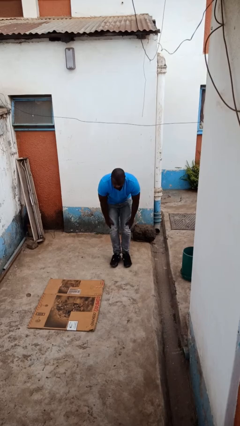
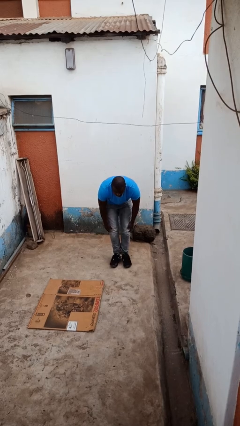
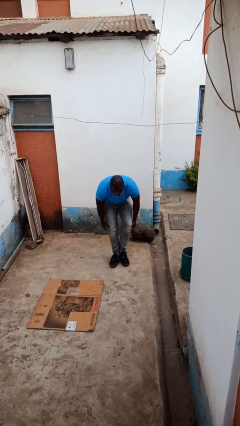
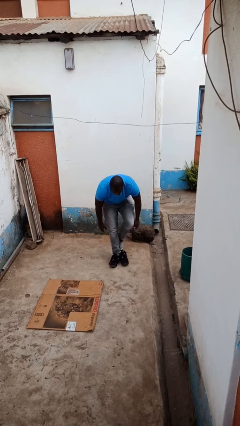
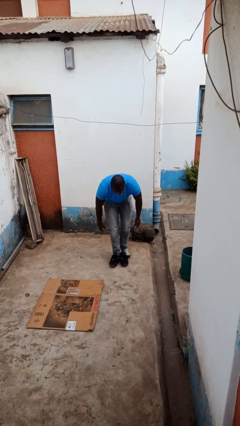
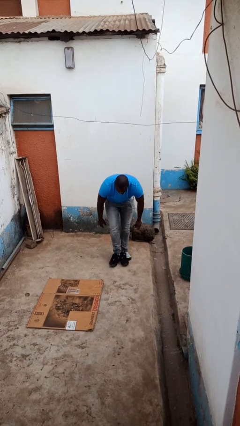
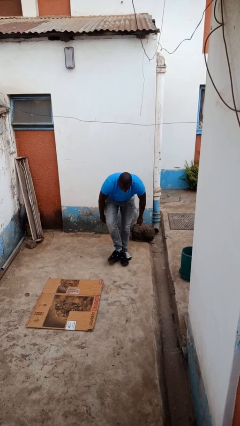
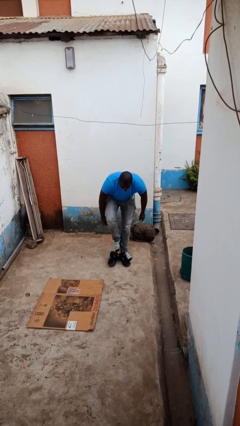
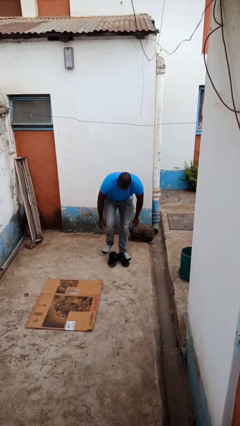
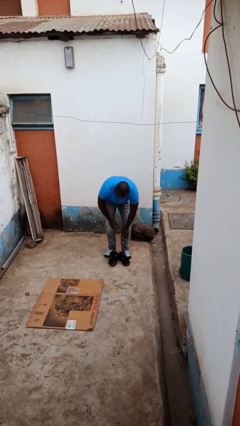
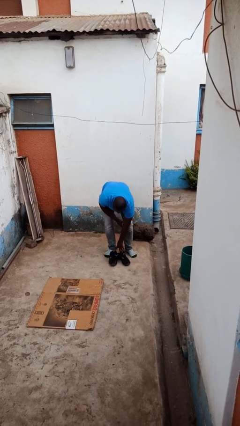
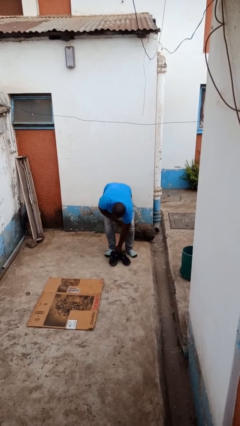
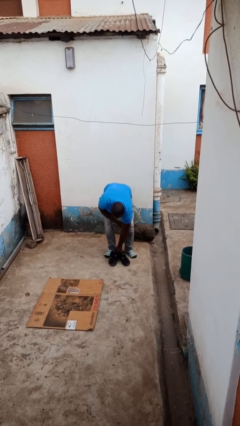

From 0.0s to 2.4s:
person takes off shoes

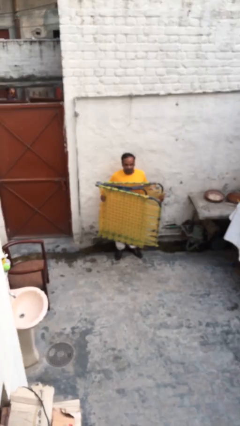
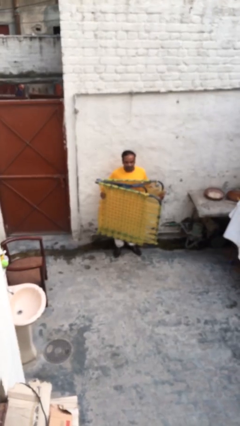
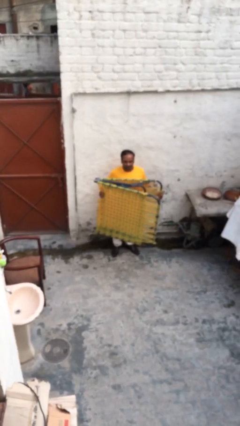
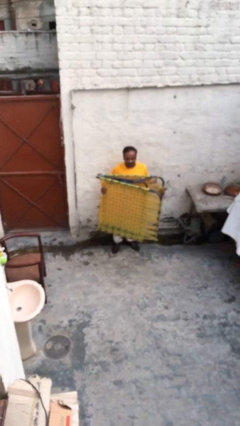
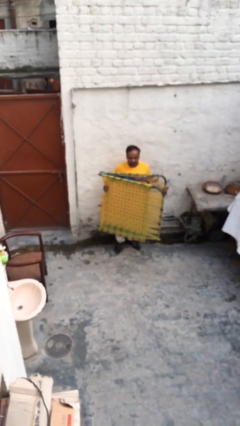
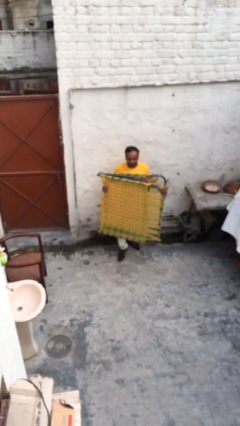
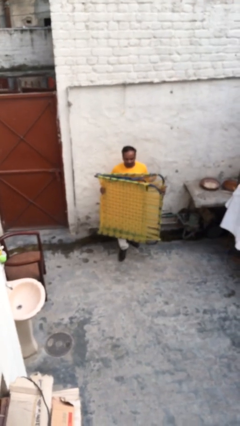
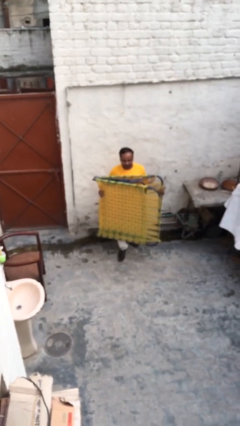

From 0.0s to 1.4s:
person carries heavy object

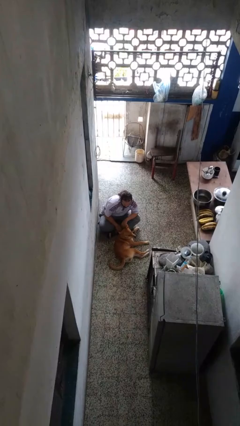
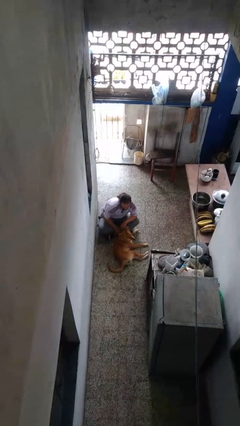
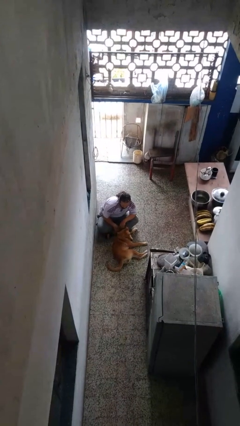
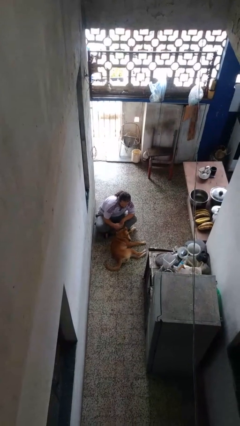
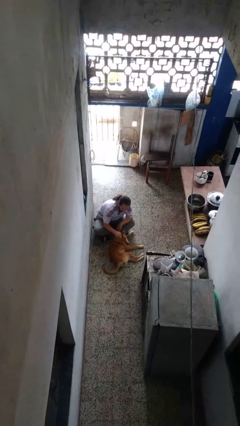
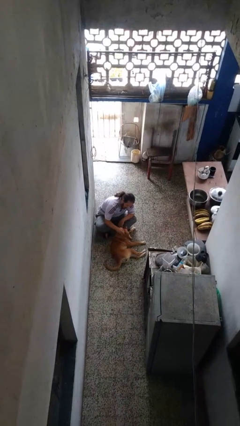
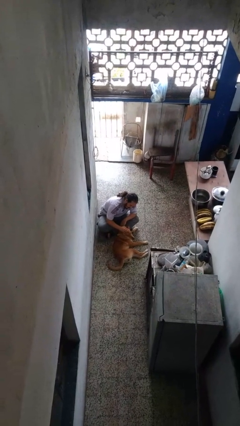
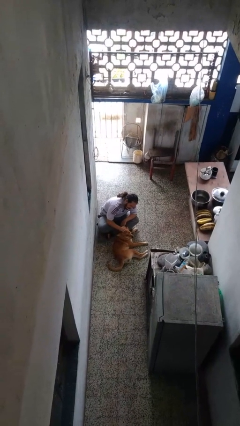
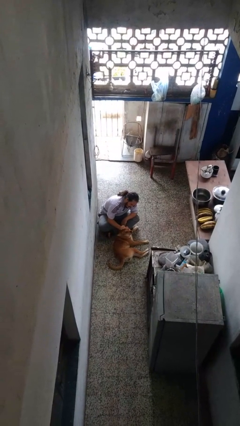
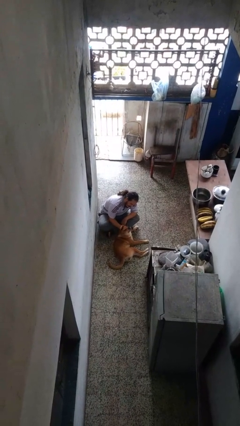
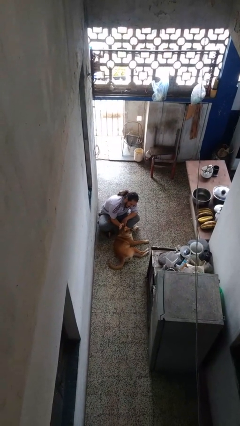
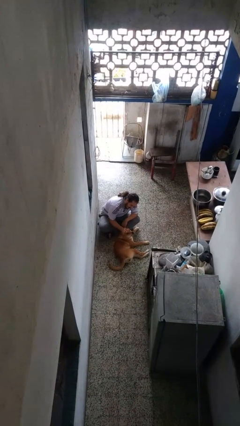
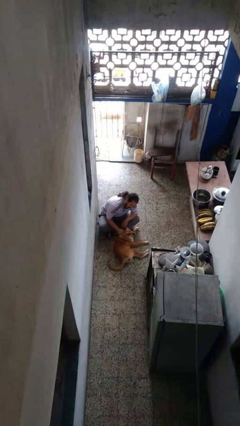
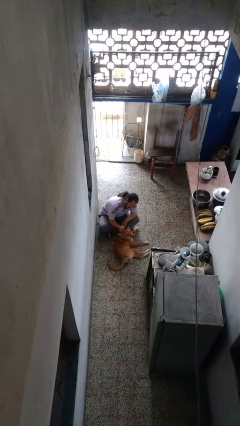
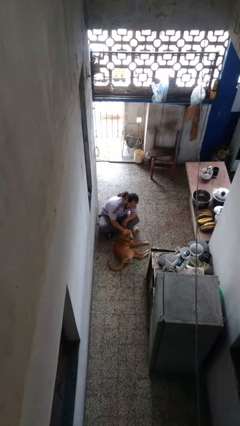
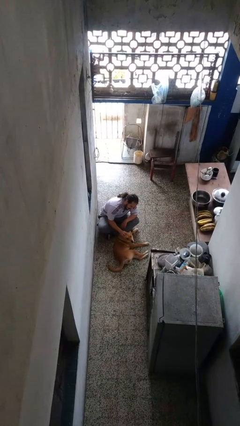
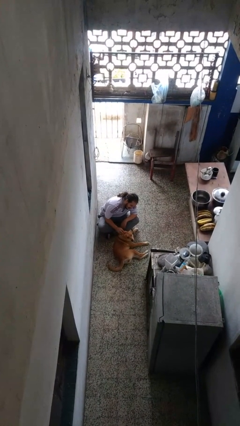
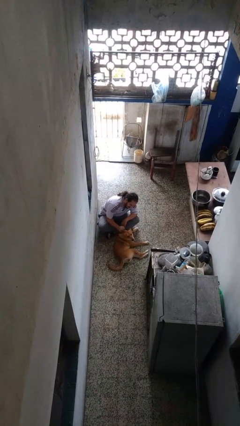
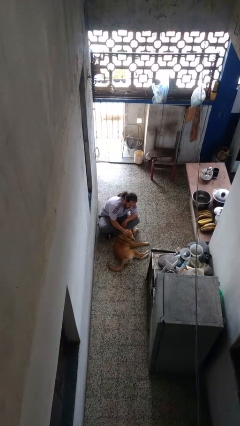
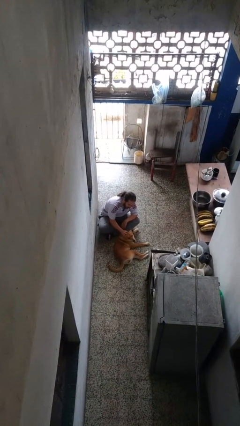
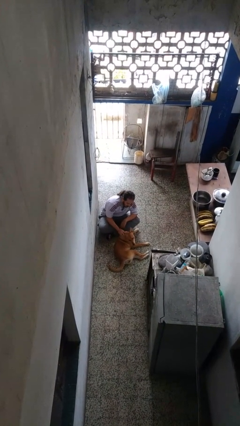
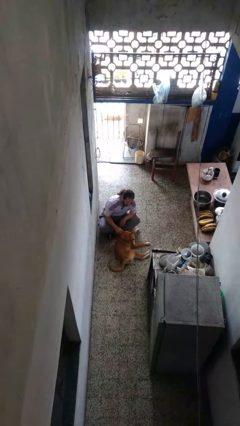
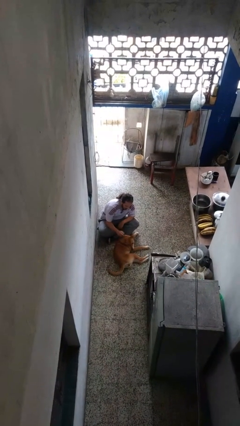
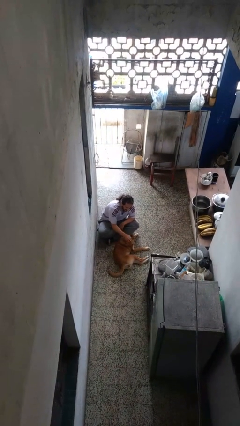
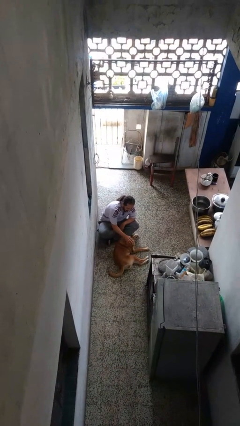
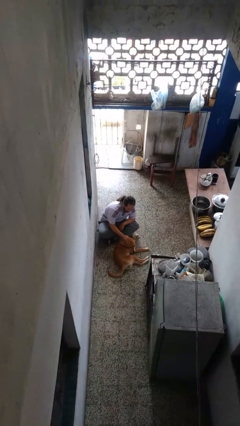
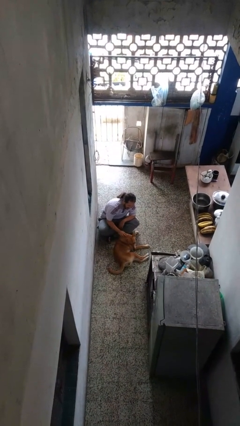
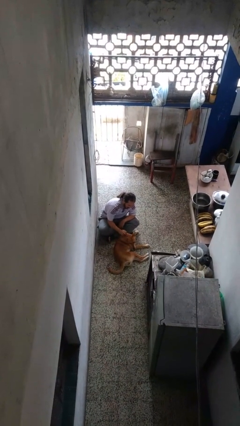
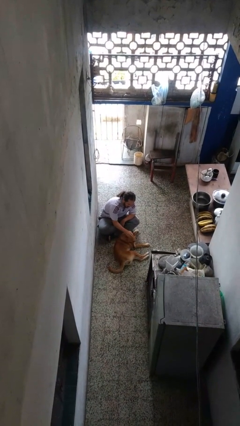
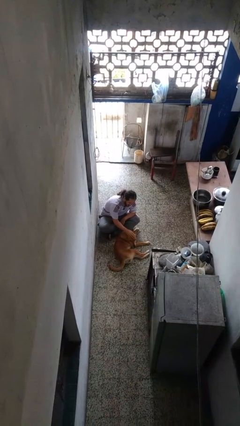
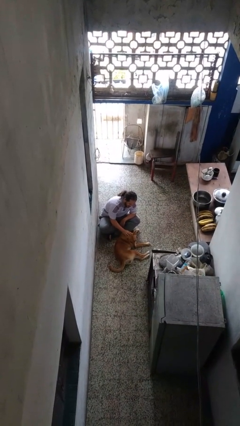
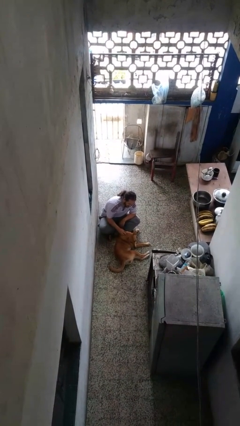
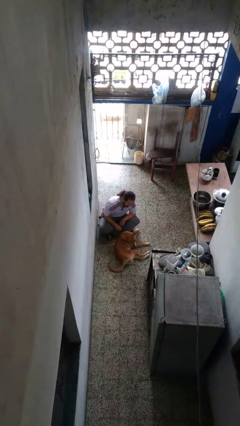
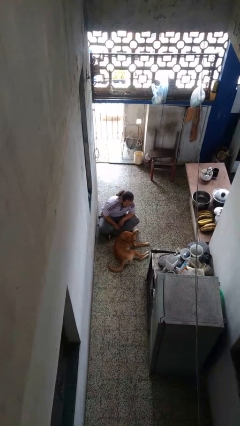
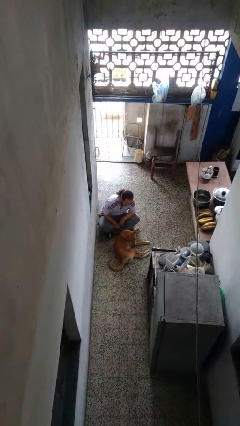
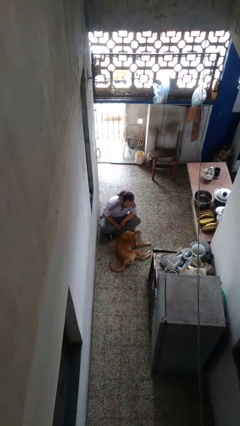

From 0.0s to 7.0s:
person pets dog

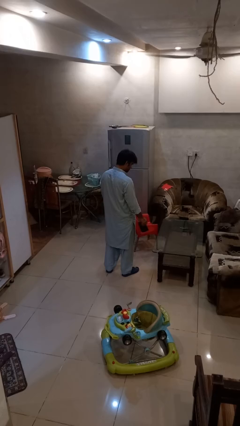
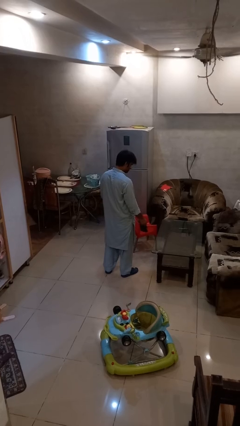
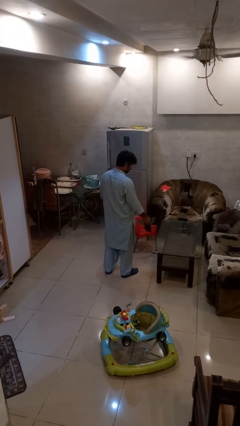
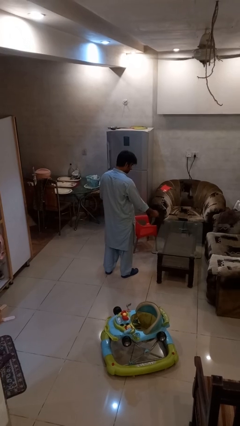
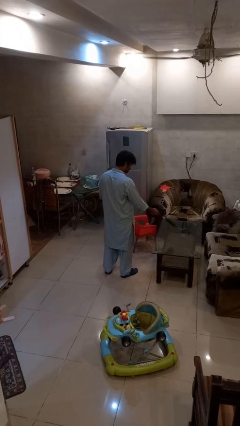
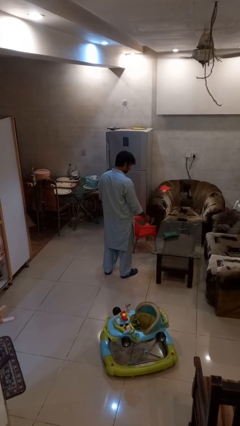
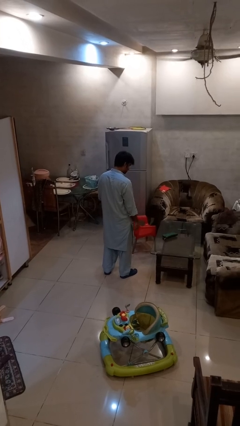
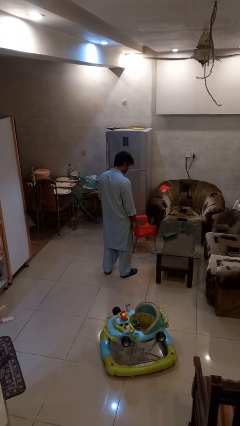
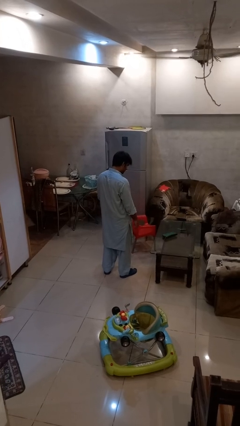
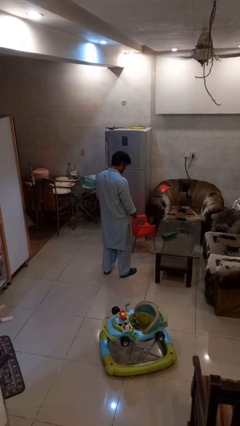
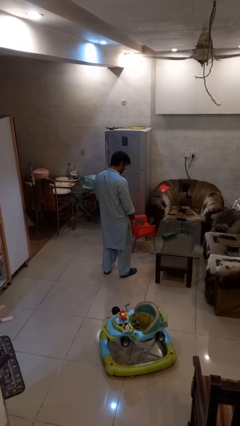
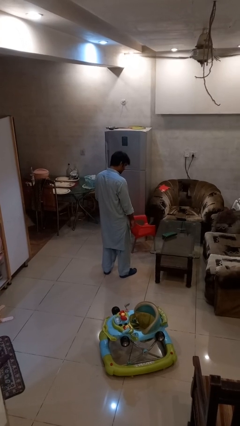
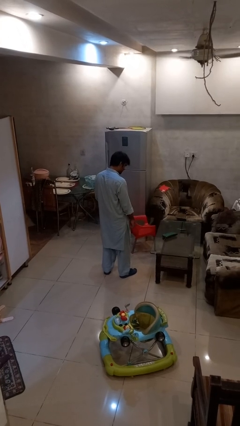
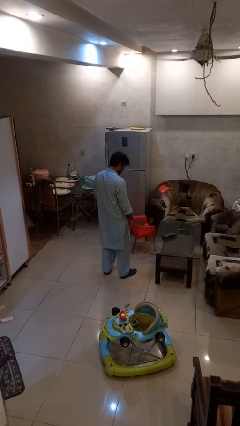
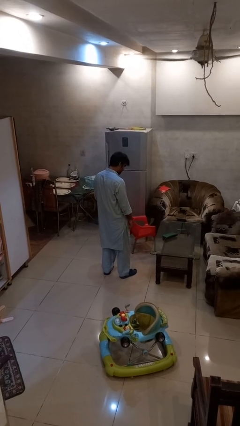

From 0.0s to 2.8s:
person throws object on table

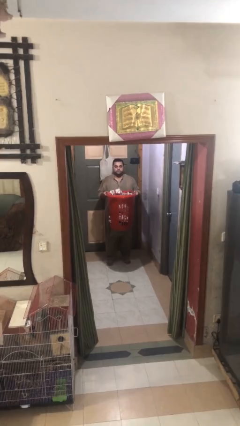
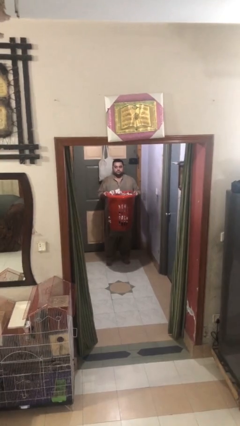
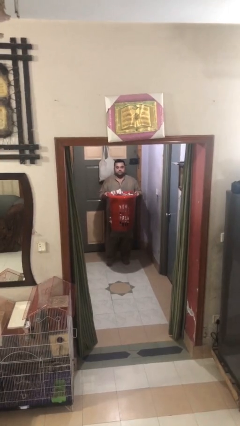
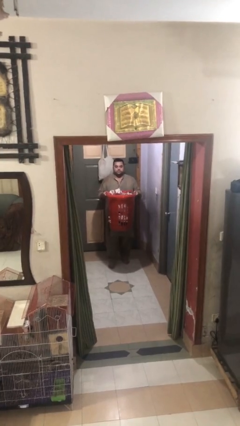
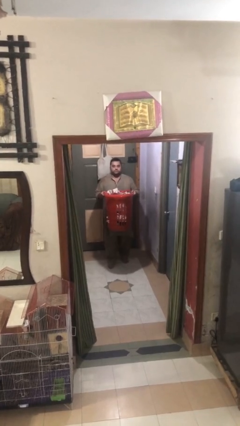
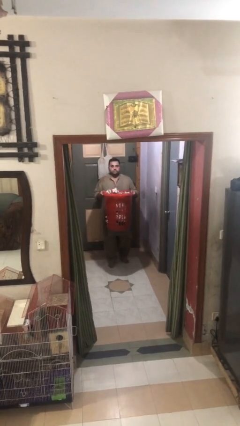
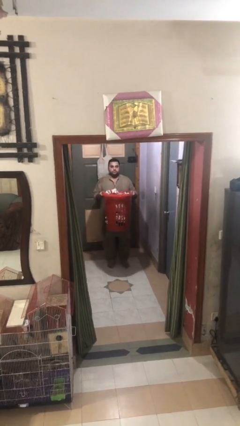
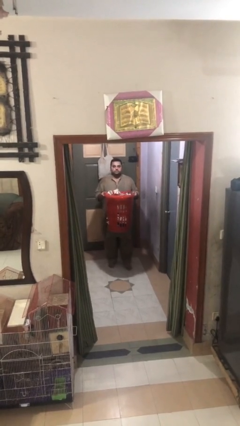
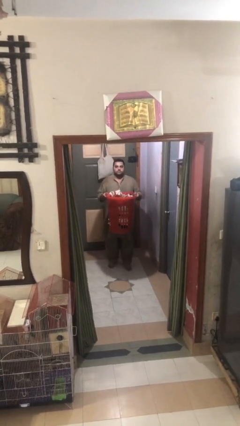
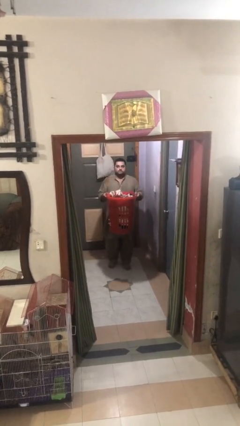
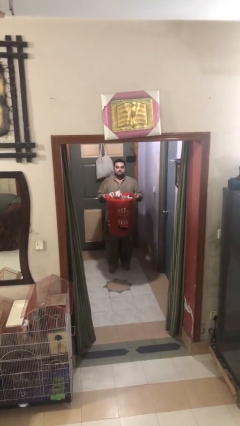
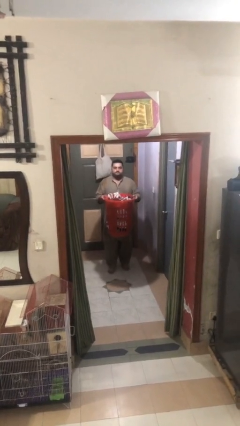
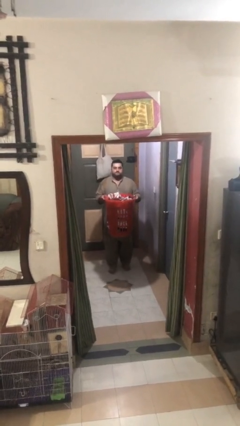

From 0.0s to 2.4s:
person carries laundry basket

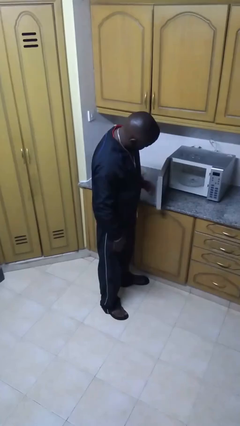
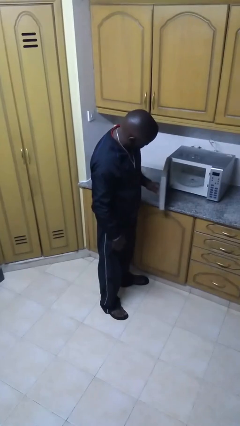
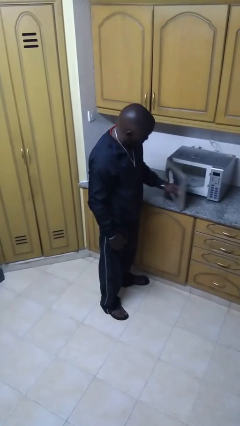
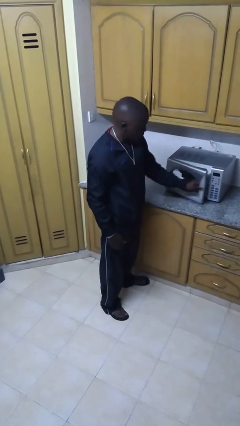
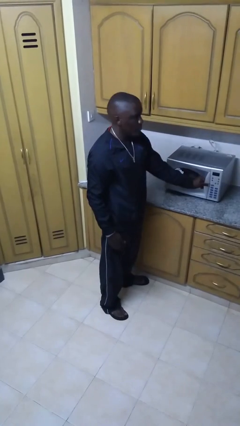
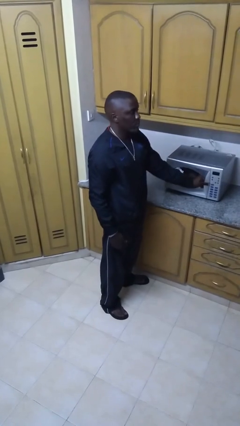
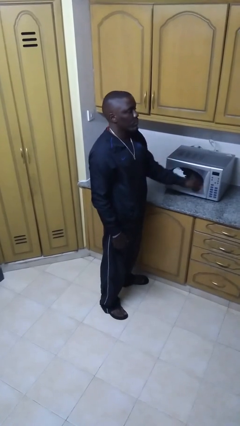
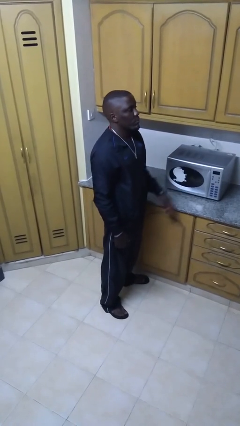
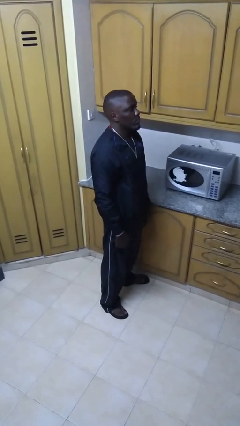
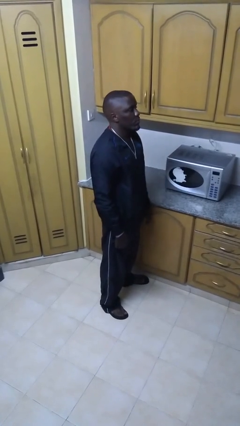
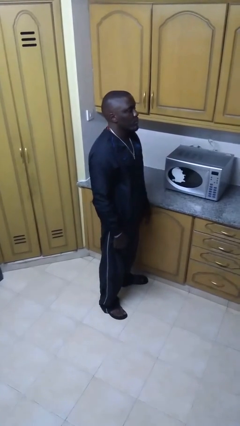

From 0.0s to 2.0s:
person closes microwave
